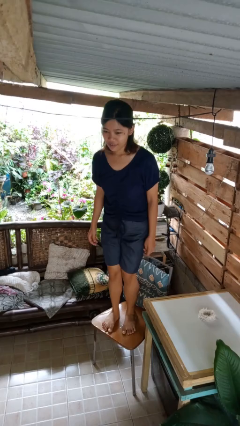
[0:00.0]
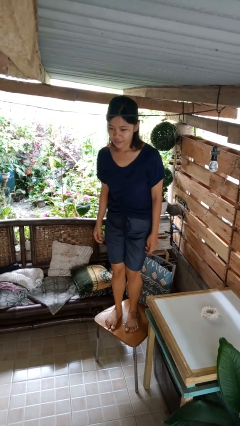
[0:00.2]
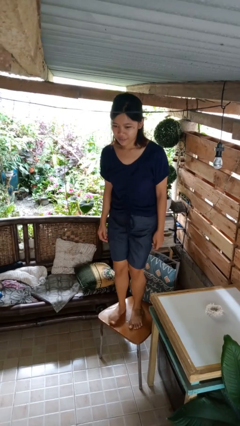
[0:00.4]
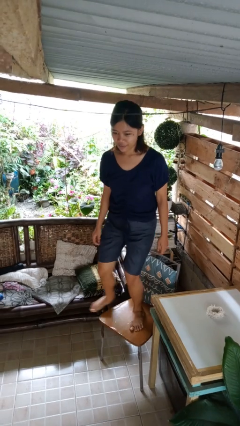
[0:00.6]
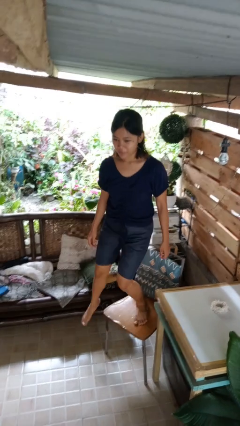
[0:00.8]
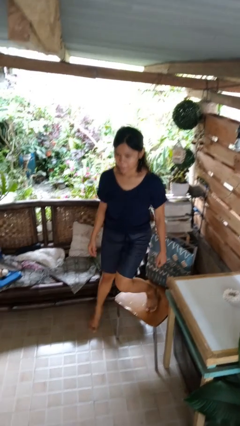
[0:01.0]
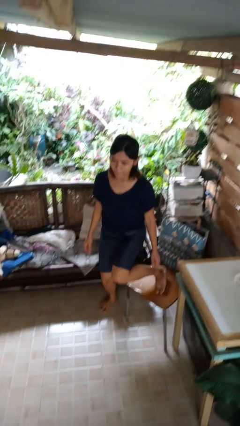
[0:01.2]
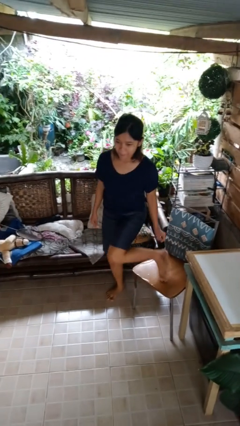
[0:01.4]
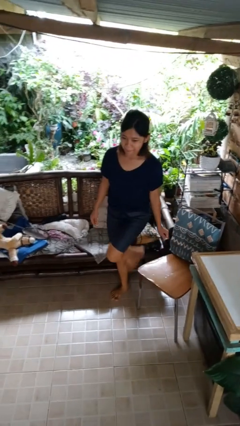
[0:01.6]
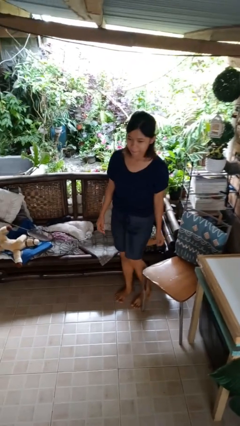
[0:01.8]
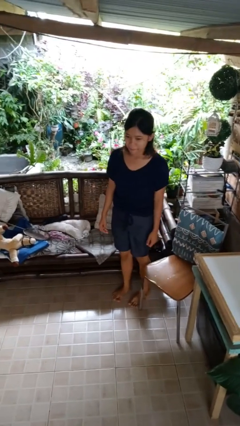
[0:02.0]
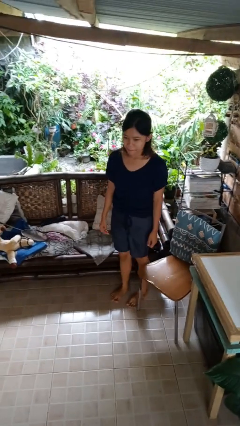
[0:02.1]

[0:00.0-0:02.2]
person climbs off chair

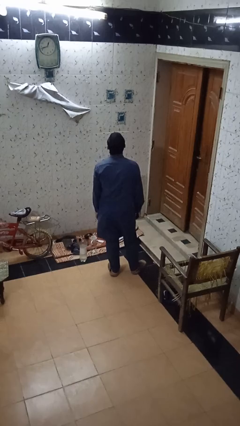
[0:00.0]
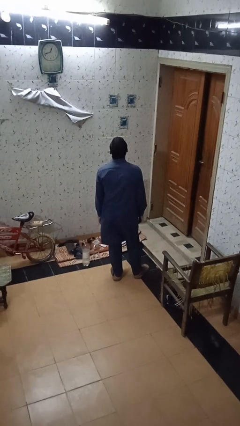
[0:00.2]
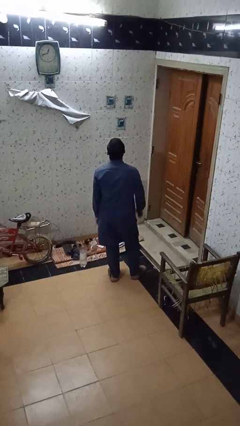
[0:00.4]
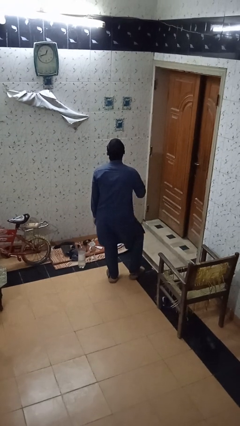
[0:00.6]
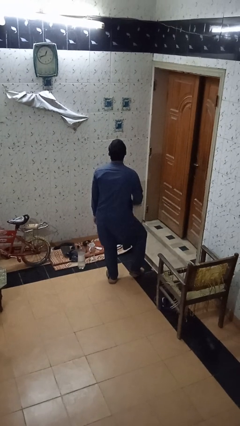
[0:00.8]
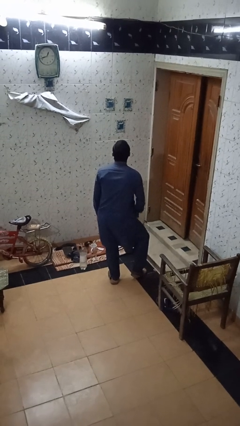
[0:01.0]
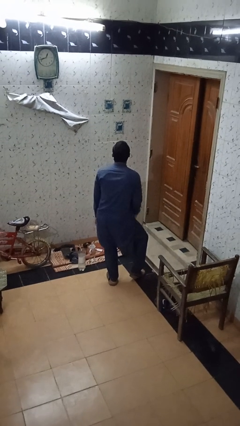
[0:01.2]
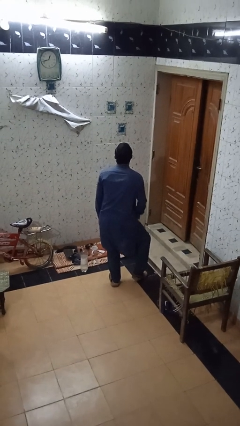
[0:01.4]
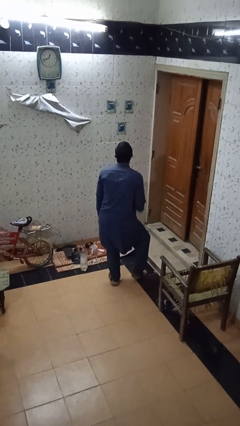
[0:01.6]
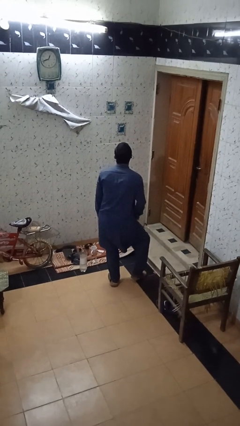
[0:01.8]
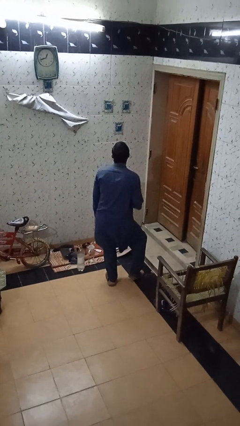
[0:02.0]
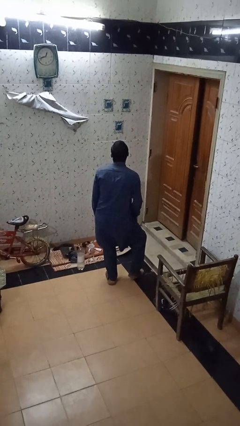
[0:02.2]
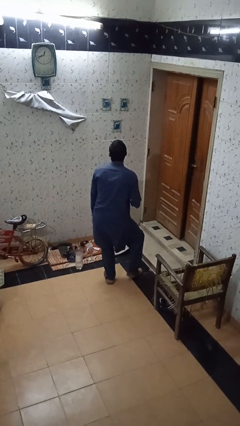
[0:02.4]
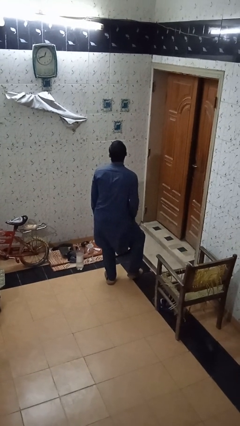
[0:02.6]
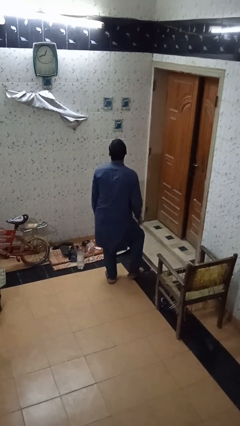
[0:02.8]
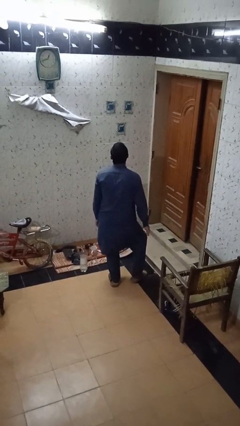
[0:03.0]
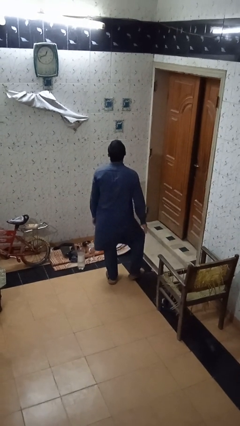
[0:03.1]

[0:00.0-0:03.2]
person slaps hands on thighs

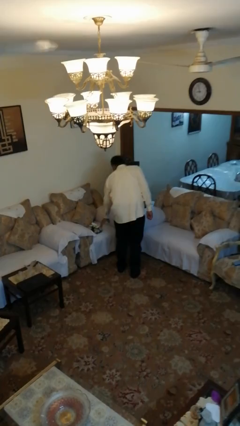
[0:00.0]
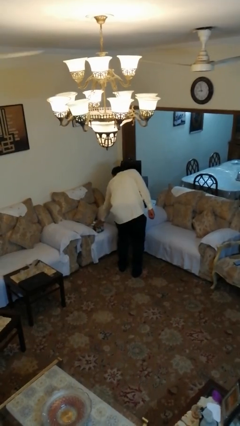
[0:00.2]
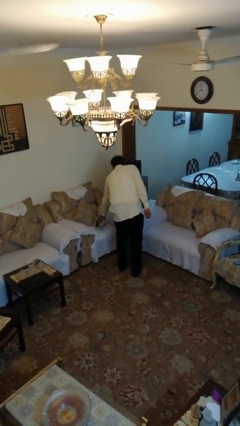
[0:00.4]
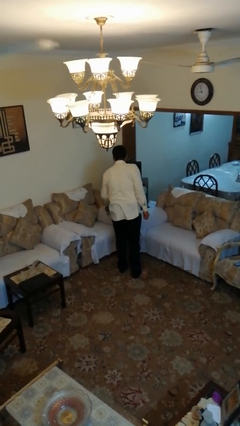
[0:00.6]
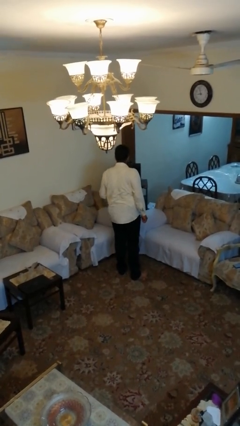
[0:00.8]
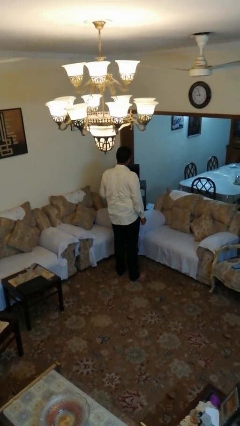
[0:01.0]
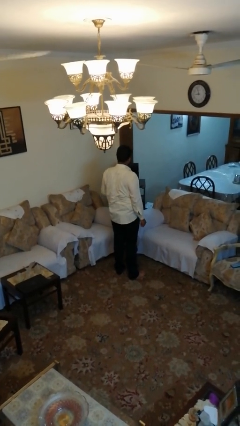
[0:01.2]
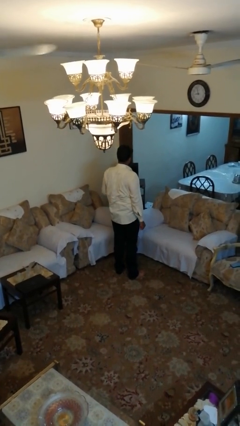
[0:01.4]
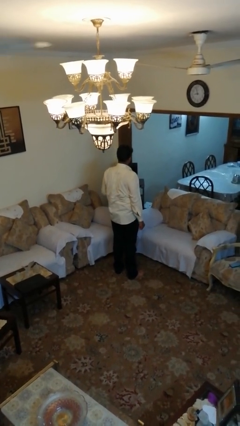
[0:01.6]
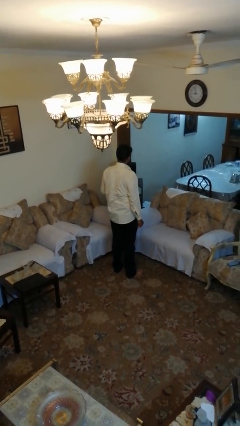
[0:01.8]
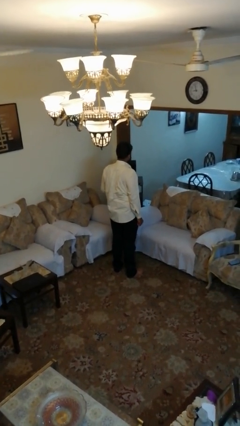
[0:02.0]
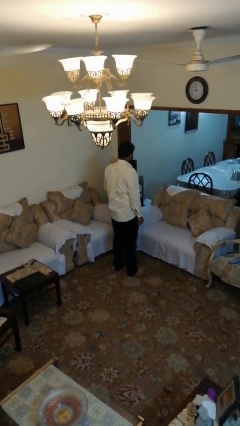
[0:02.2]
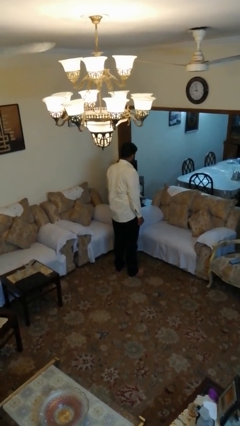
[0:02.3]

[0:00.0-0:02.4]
person picks up object from couch

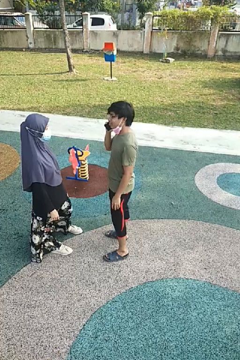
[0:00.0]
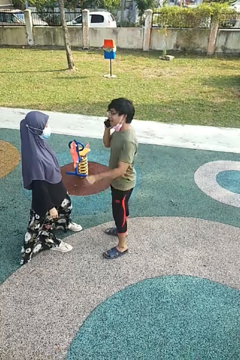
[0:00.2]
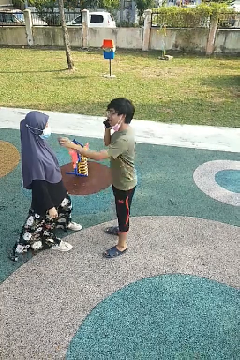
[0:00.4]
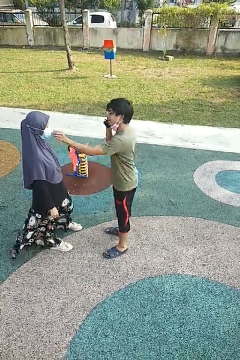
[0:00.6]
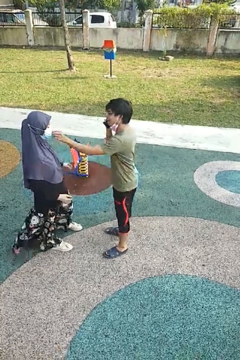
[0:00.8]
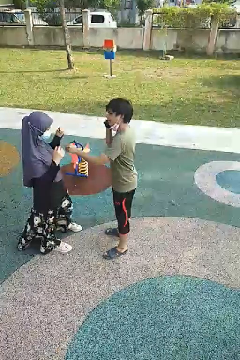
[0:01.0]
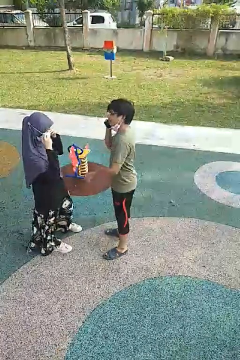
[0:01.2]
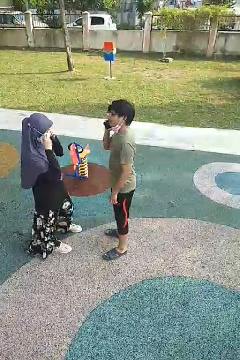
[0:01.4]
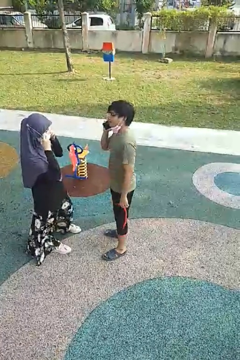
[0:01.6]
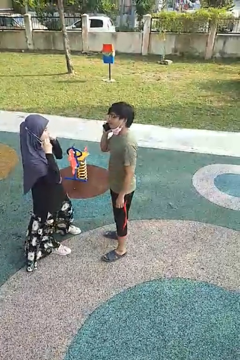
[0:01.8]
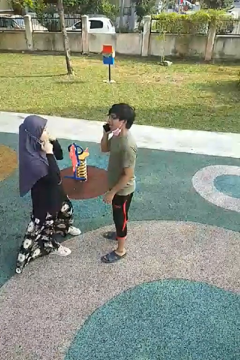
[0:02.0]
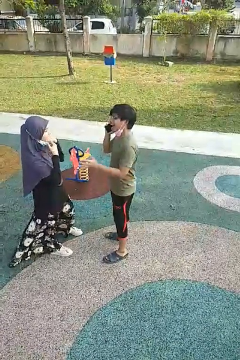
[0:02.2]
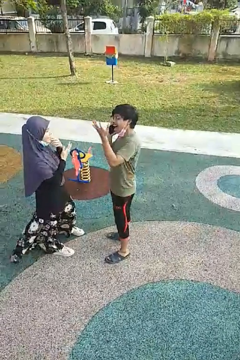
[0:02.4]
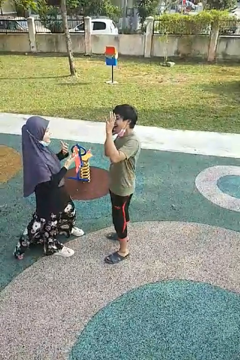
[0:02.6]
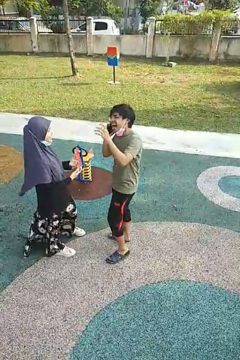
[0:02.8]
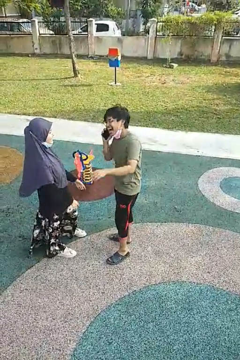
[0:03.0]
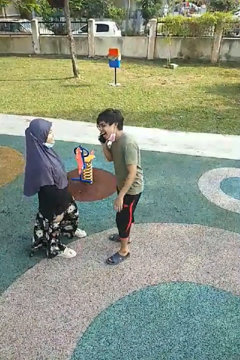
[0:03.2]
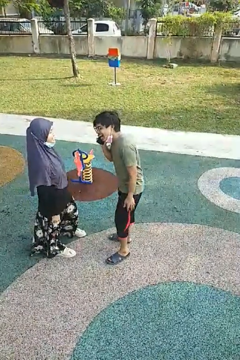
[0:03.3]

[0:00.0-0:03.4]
person laughs with person

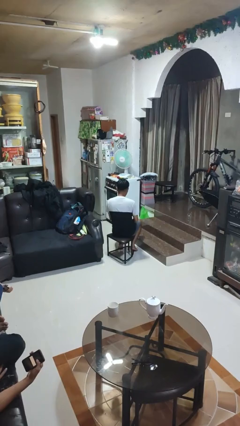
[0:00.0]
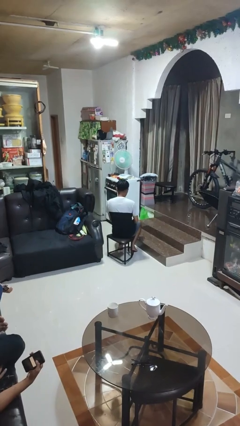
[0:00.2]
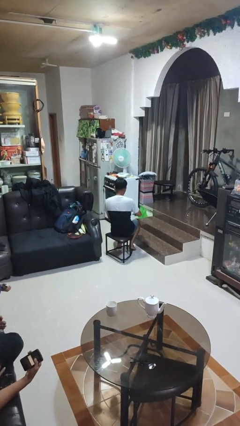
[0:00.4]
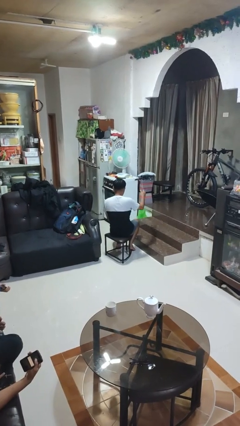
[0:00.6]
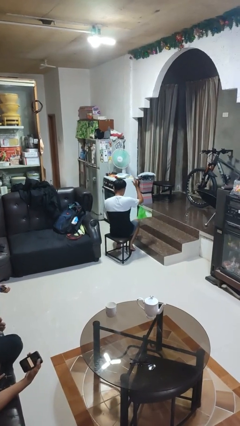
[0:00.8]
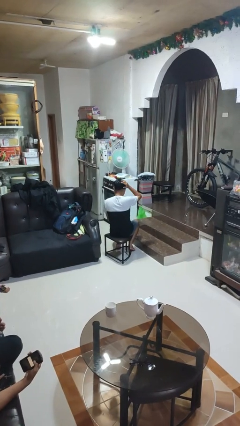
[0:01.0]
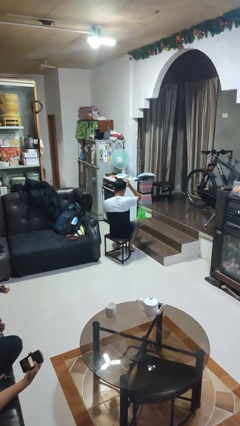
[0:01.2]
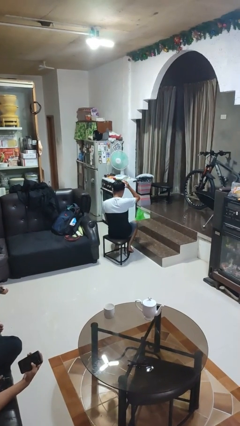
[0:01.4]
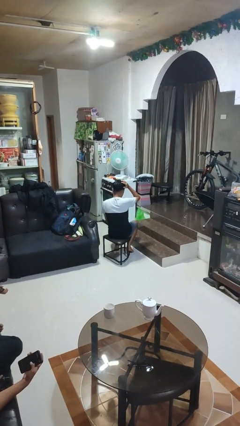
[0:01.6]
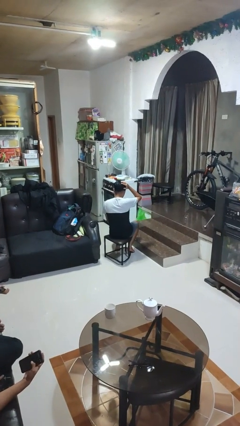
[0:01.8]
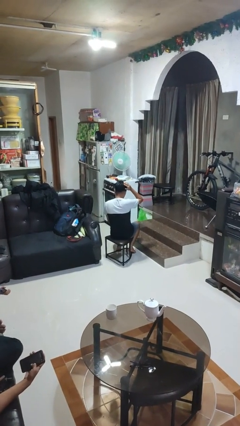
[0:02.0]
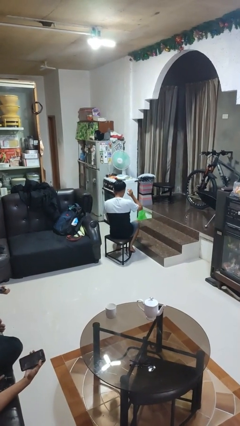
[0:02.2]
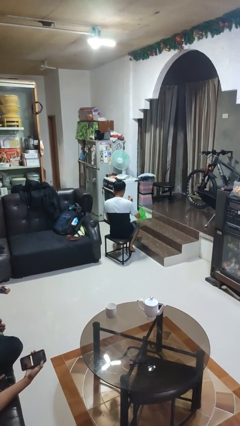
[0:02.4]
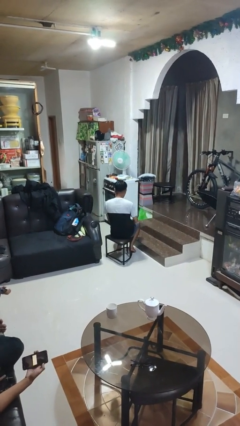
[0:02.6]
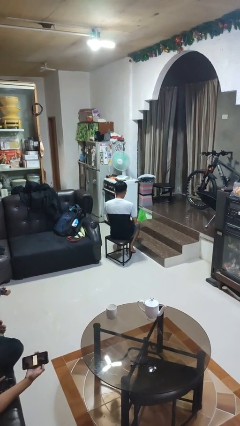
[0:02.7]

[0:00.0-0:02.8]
person pats head

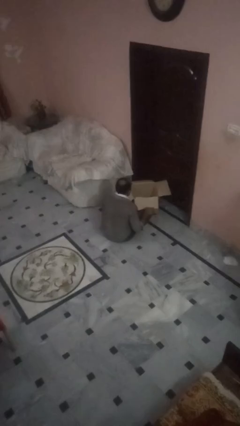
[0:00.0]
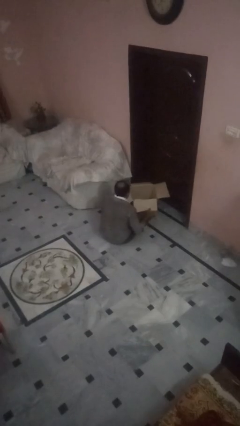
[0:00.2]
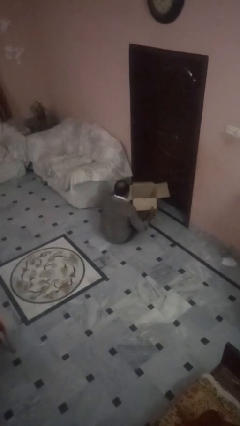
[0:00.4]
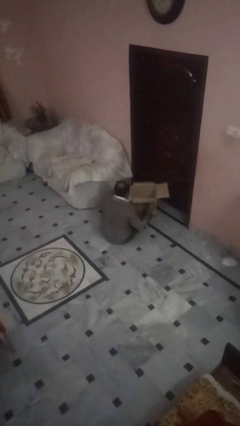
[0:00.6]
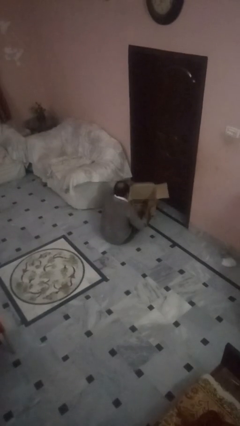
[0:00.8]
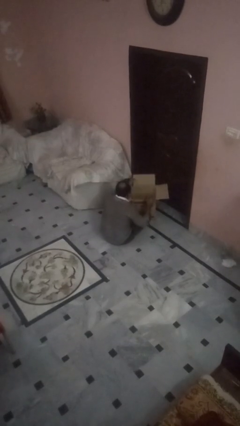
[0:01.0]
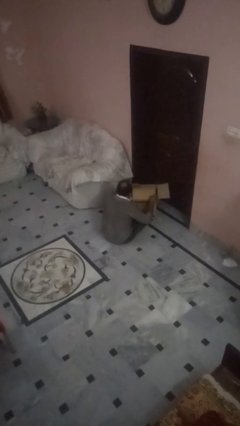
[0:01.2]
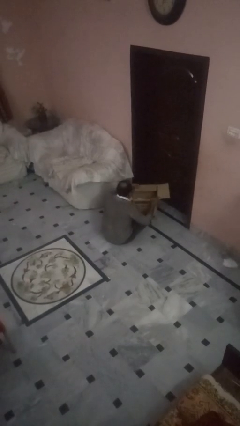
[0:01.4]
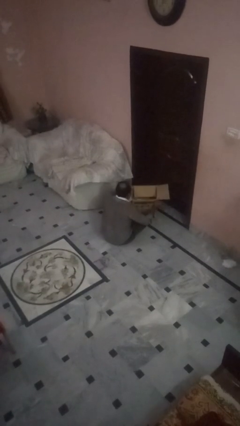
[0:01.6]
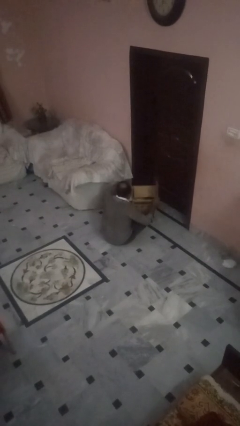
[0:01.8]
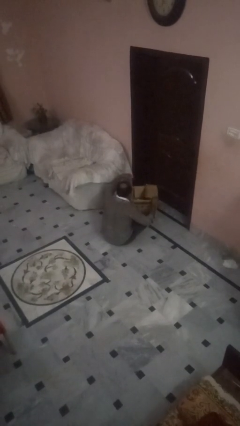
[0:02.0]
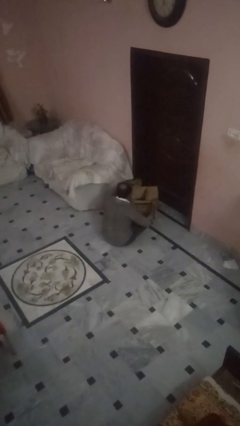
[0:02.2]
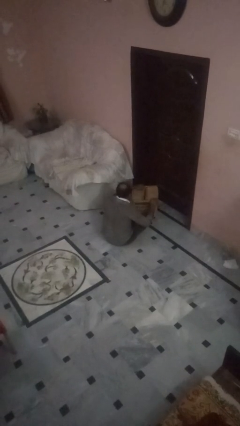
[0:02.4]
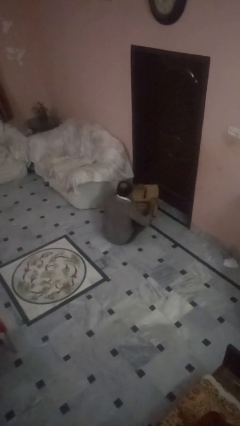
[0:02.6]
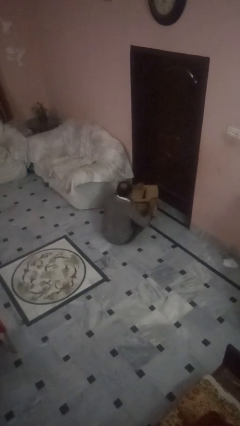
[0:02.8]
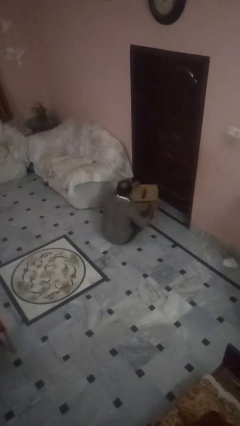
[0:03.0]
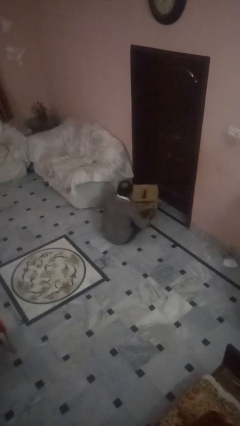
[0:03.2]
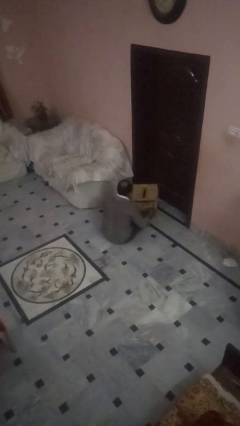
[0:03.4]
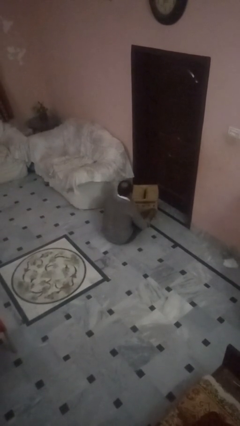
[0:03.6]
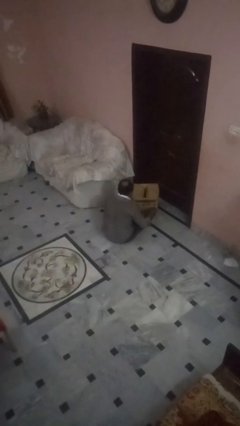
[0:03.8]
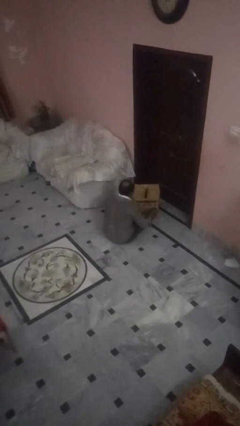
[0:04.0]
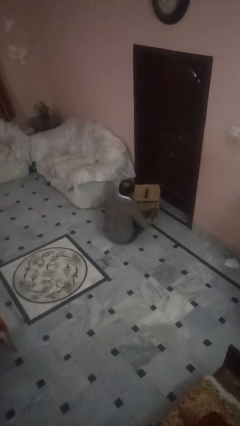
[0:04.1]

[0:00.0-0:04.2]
person closes box
